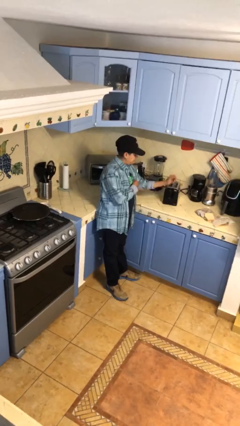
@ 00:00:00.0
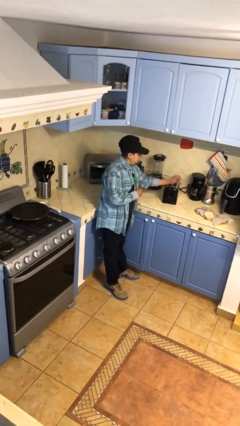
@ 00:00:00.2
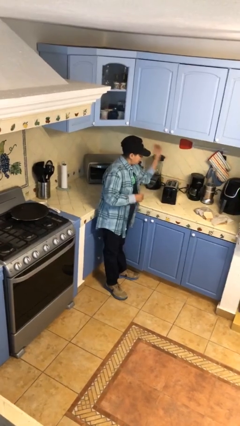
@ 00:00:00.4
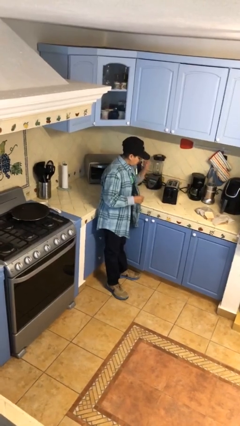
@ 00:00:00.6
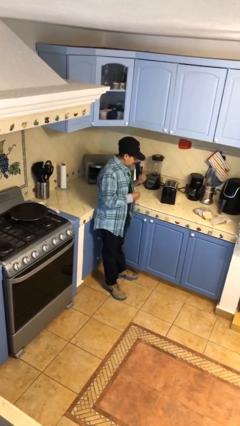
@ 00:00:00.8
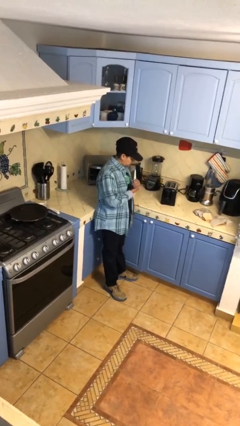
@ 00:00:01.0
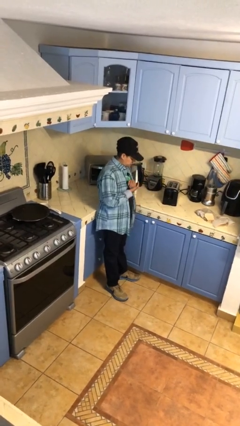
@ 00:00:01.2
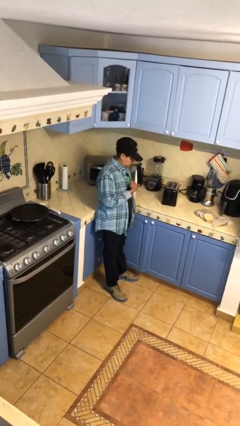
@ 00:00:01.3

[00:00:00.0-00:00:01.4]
person burns hand

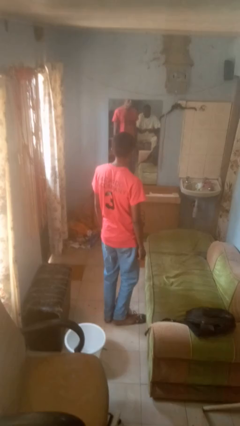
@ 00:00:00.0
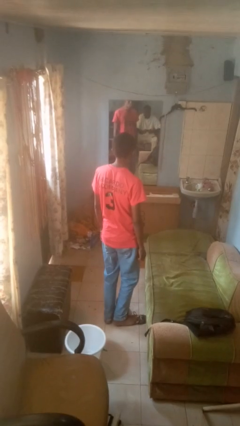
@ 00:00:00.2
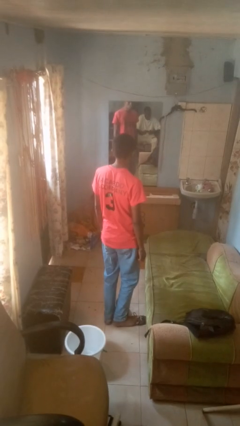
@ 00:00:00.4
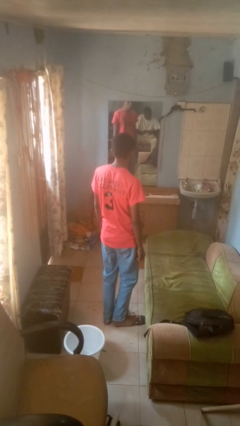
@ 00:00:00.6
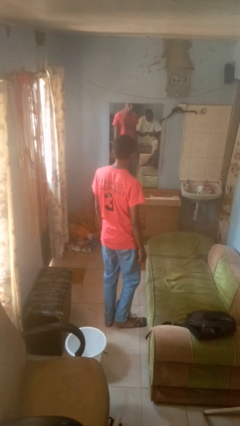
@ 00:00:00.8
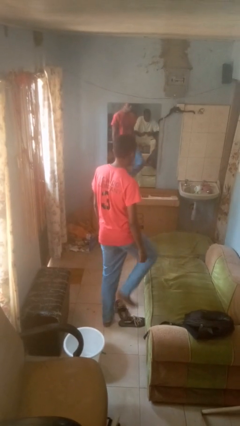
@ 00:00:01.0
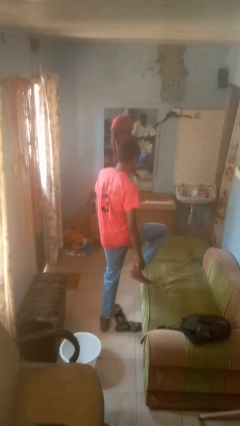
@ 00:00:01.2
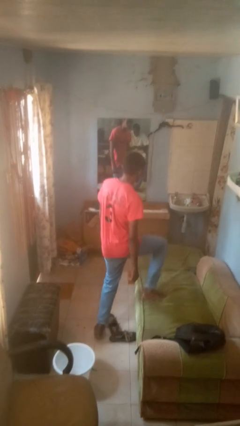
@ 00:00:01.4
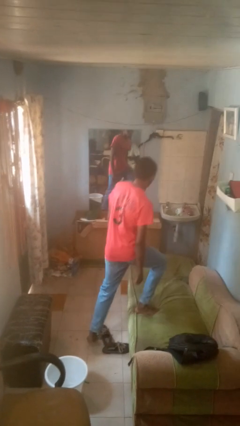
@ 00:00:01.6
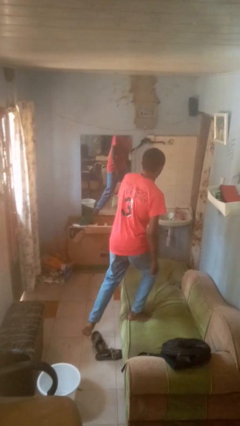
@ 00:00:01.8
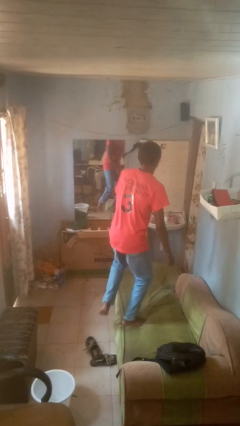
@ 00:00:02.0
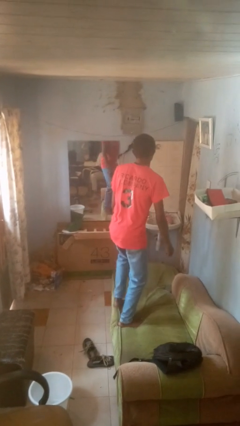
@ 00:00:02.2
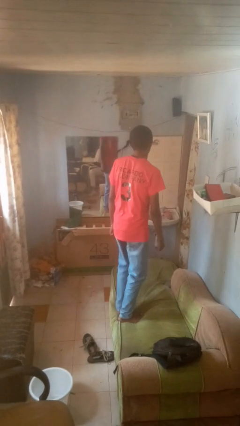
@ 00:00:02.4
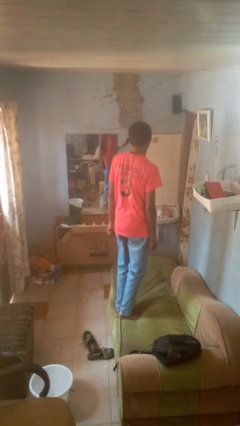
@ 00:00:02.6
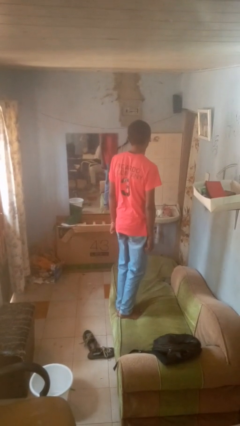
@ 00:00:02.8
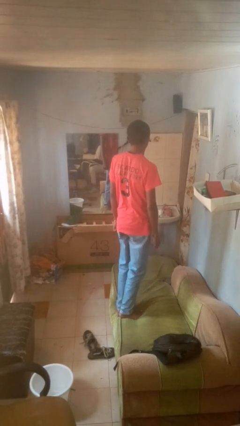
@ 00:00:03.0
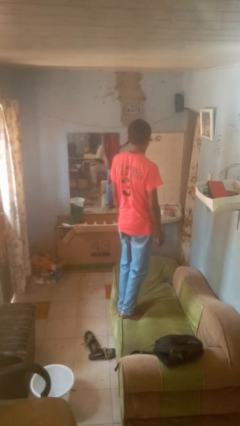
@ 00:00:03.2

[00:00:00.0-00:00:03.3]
person climbs on couch

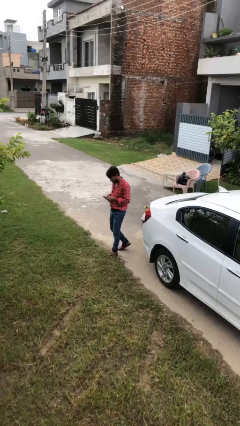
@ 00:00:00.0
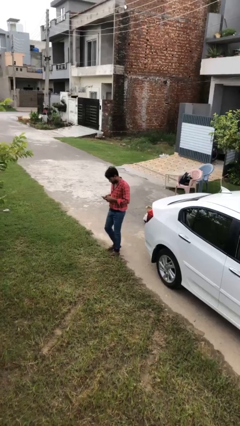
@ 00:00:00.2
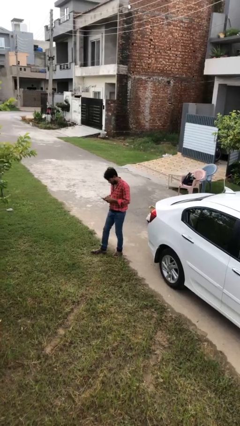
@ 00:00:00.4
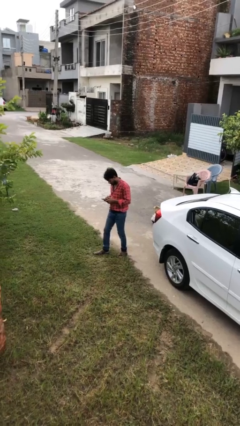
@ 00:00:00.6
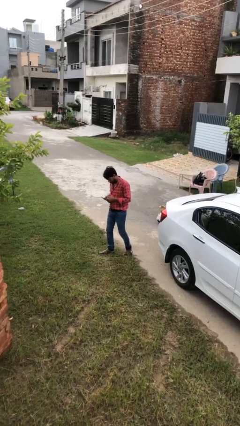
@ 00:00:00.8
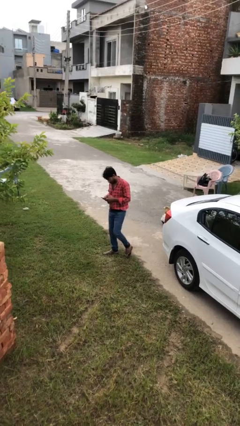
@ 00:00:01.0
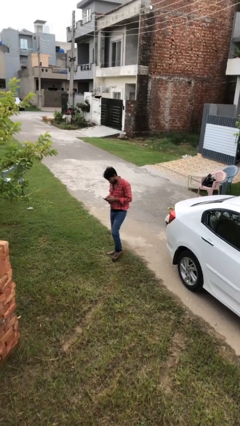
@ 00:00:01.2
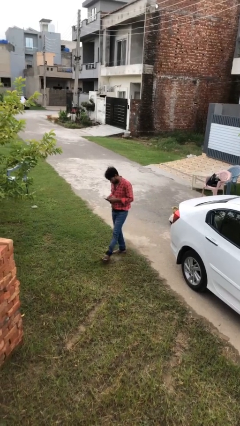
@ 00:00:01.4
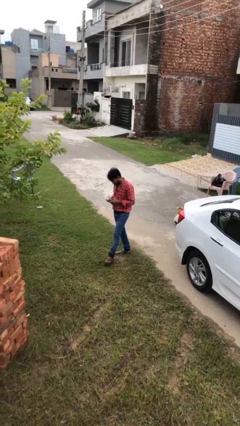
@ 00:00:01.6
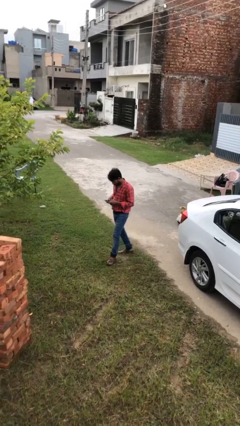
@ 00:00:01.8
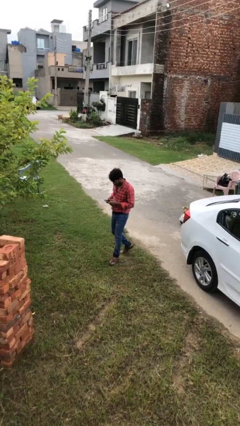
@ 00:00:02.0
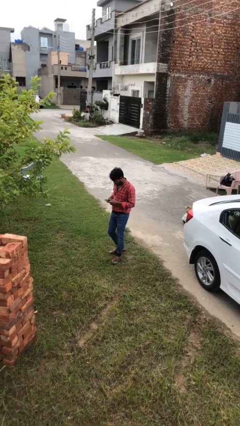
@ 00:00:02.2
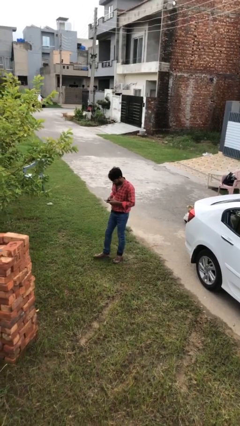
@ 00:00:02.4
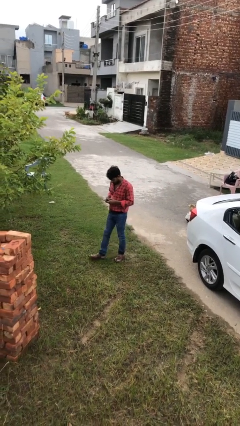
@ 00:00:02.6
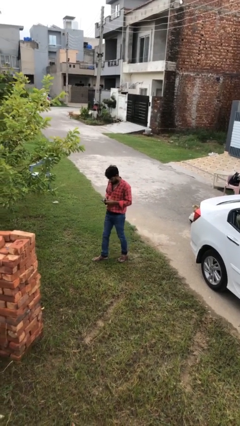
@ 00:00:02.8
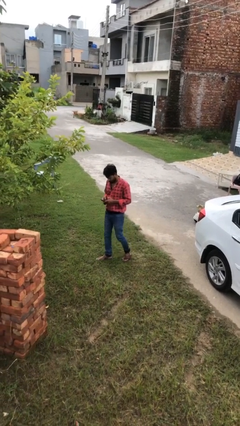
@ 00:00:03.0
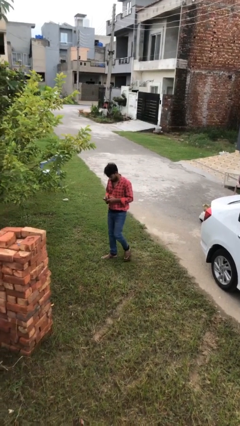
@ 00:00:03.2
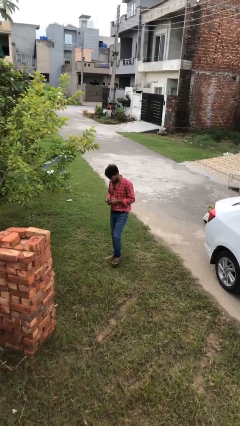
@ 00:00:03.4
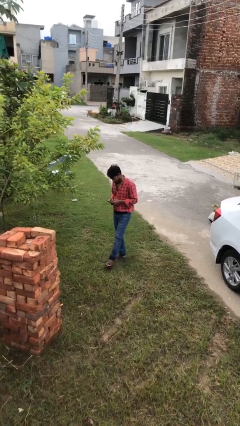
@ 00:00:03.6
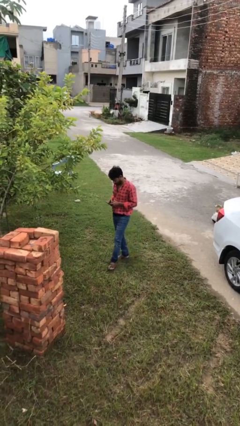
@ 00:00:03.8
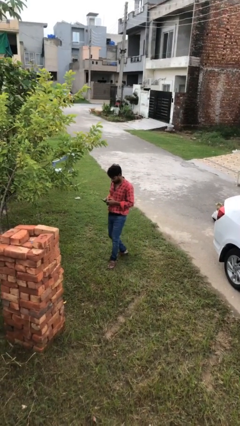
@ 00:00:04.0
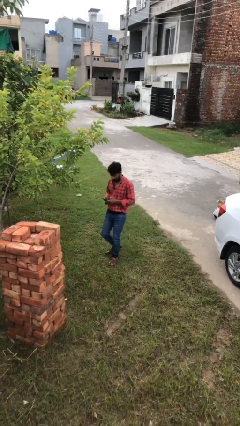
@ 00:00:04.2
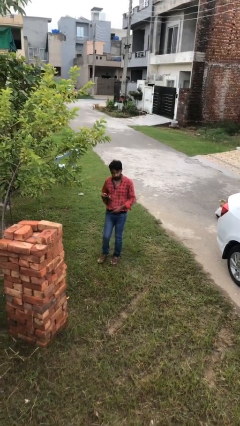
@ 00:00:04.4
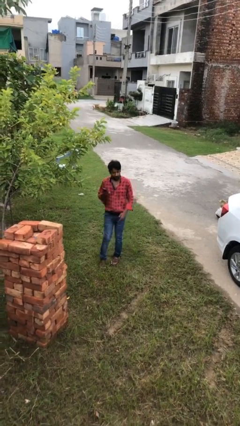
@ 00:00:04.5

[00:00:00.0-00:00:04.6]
person texts on phone

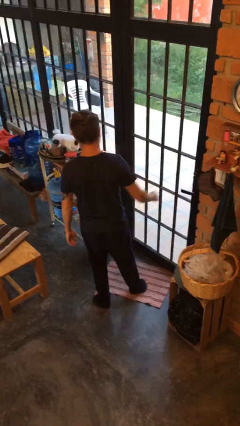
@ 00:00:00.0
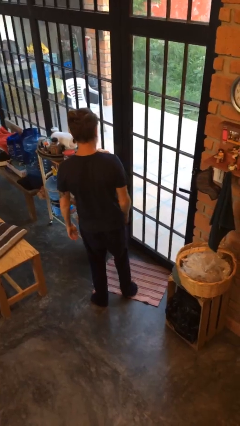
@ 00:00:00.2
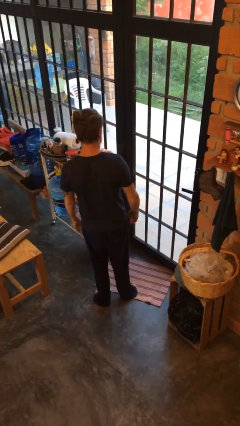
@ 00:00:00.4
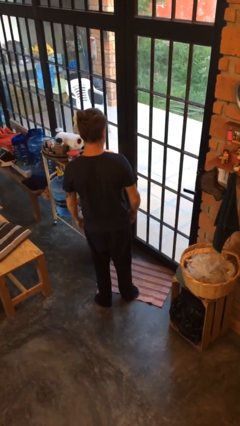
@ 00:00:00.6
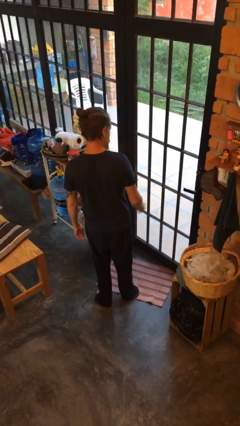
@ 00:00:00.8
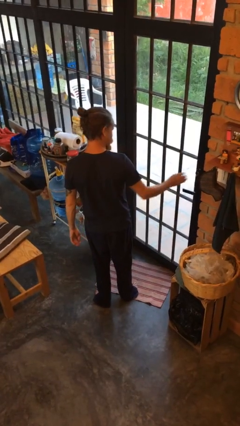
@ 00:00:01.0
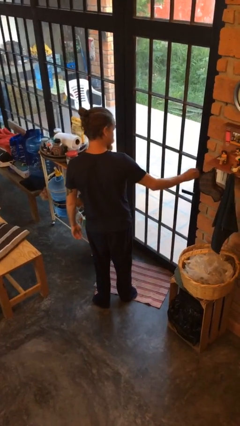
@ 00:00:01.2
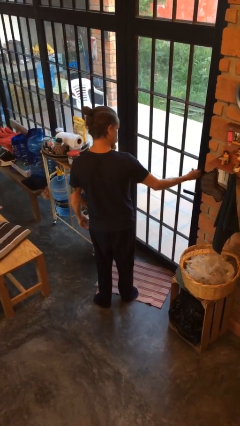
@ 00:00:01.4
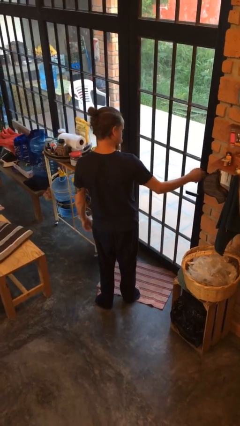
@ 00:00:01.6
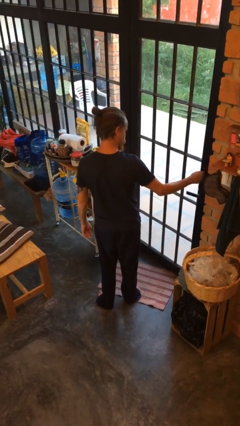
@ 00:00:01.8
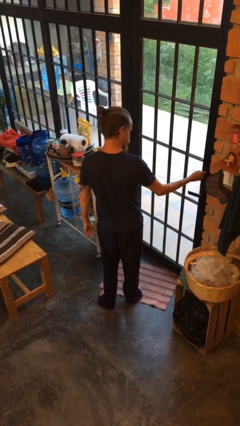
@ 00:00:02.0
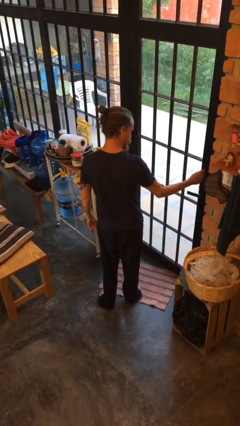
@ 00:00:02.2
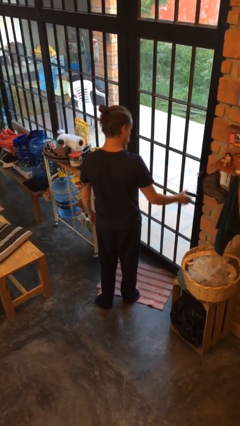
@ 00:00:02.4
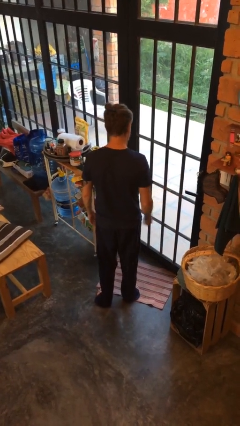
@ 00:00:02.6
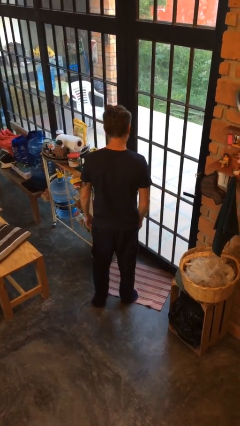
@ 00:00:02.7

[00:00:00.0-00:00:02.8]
person locks door with keys

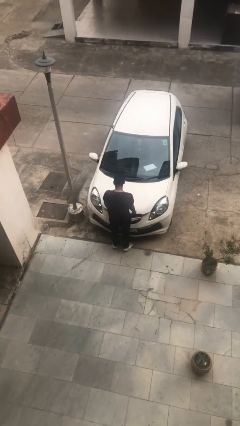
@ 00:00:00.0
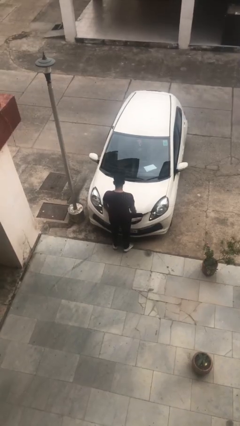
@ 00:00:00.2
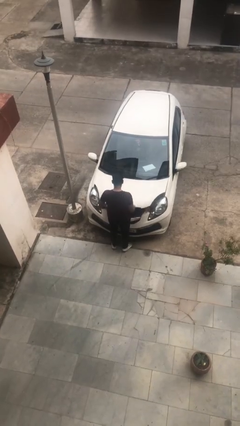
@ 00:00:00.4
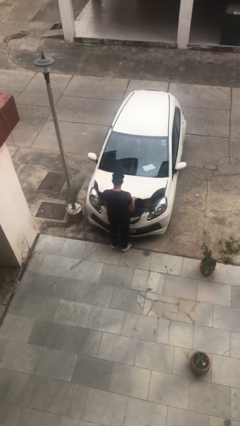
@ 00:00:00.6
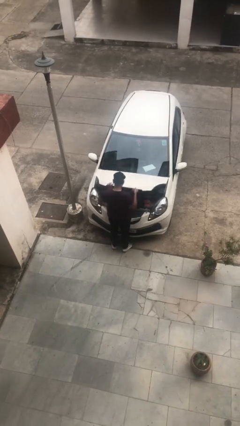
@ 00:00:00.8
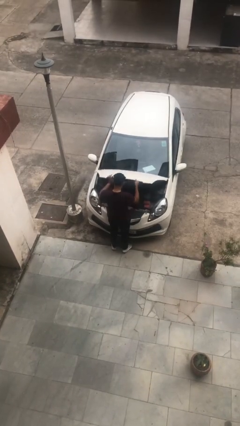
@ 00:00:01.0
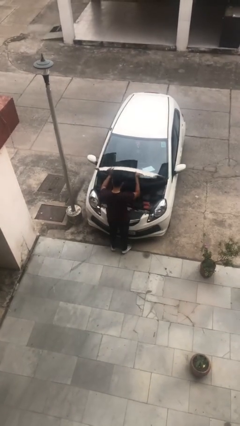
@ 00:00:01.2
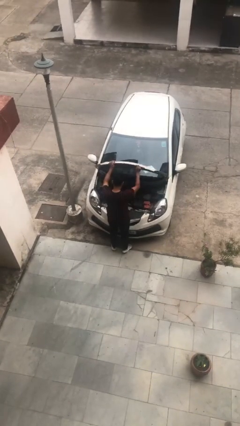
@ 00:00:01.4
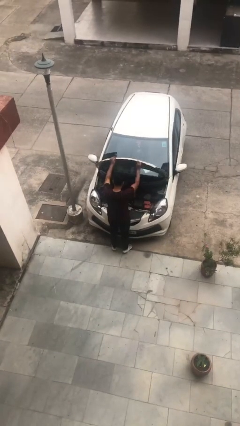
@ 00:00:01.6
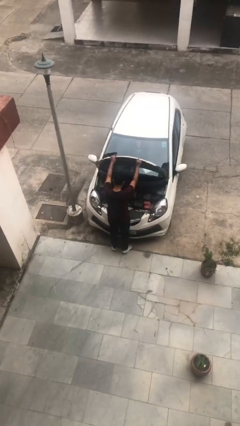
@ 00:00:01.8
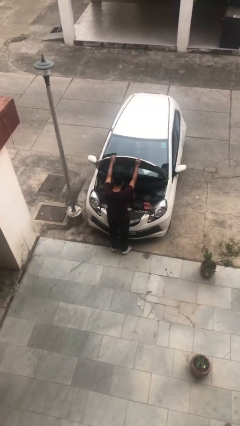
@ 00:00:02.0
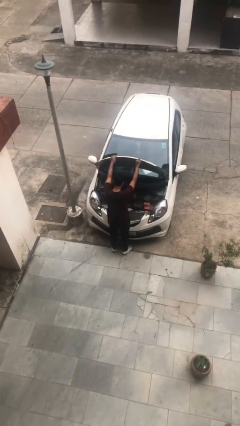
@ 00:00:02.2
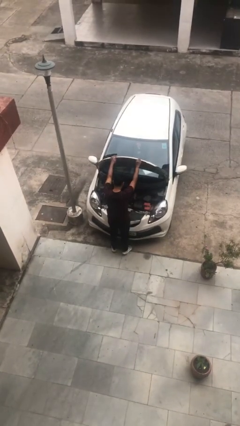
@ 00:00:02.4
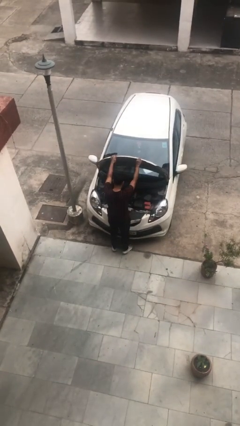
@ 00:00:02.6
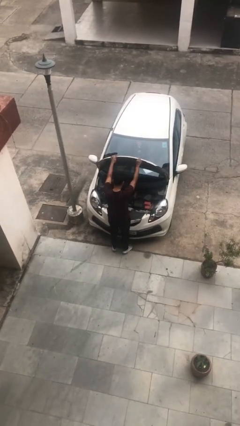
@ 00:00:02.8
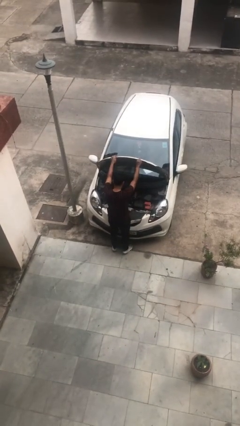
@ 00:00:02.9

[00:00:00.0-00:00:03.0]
person opens car hood

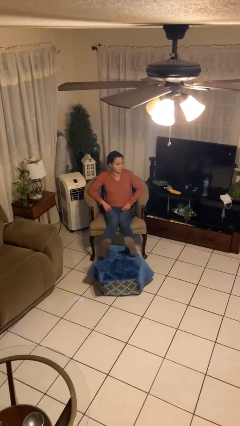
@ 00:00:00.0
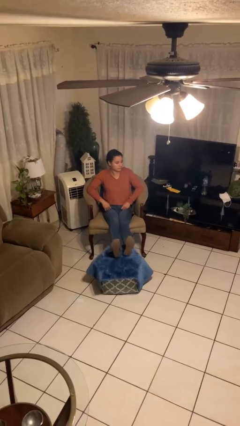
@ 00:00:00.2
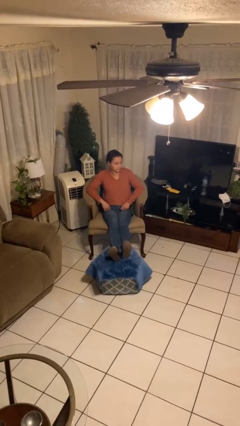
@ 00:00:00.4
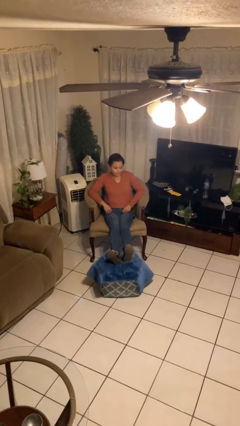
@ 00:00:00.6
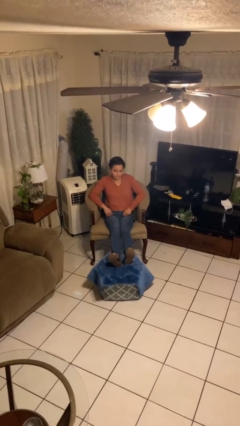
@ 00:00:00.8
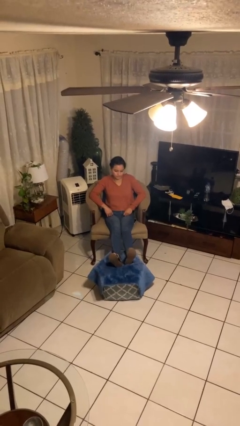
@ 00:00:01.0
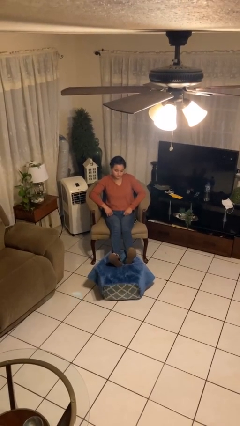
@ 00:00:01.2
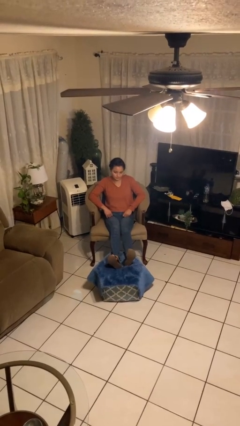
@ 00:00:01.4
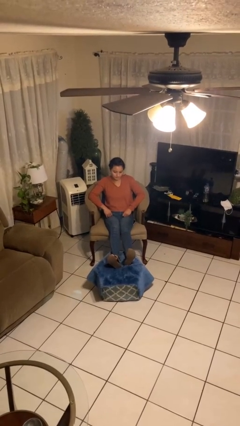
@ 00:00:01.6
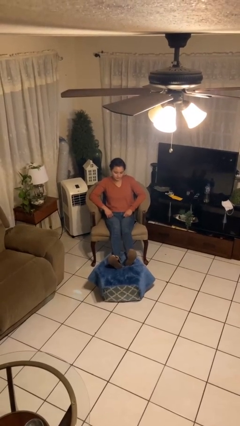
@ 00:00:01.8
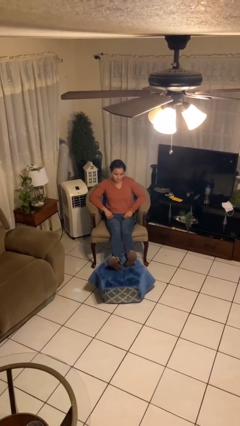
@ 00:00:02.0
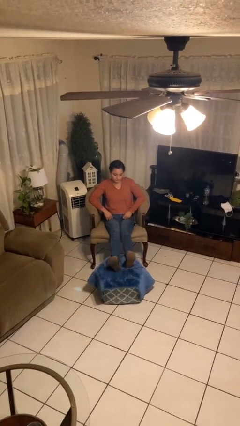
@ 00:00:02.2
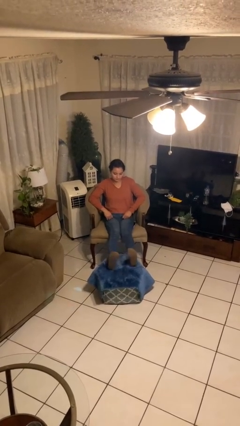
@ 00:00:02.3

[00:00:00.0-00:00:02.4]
person puts feet up
